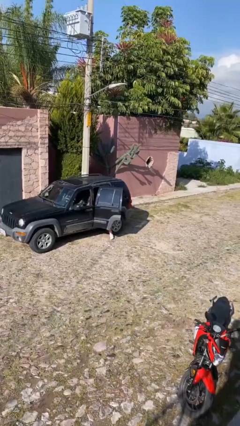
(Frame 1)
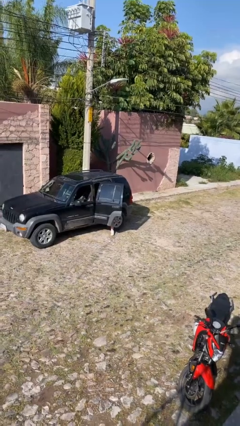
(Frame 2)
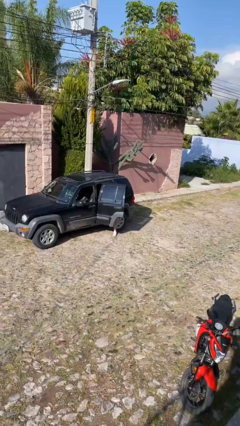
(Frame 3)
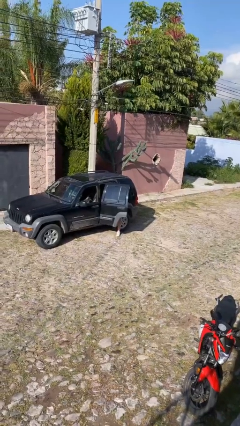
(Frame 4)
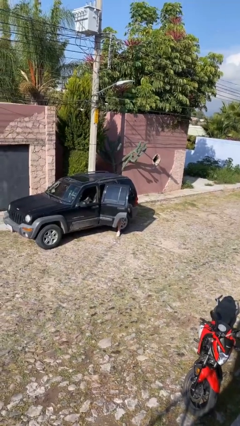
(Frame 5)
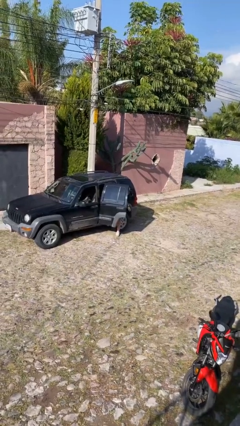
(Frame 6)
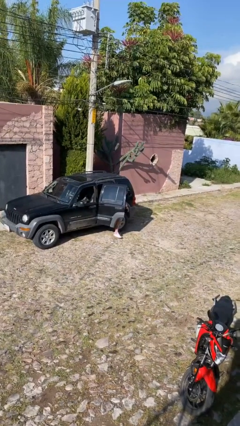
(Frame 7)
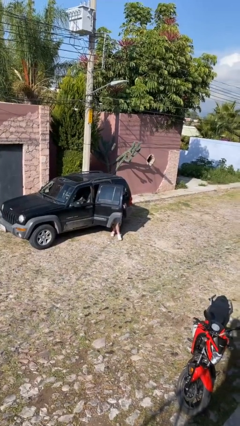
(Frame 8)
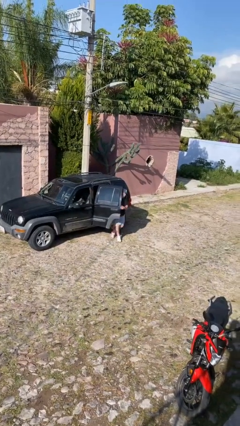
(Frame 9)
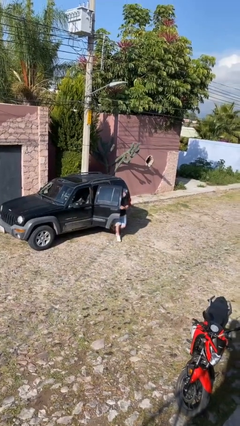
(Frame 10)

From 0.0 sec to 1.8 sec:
person exits car

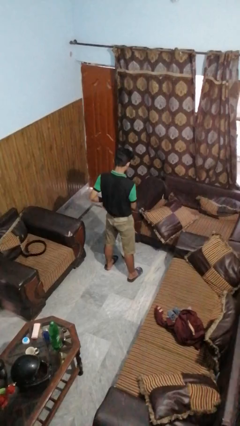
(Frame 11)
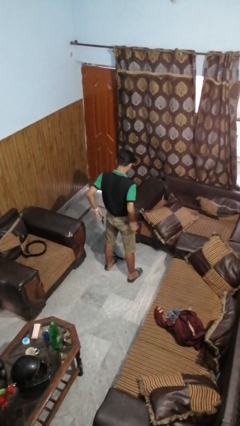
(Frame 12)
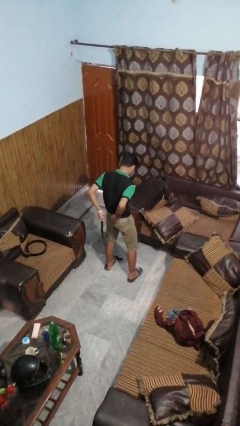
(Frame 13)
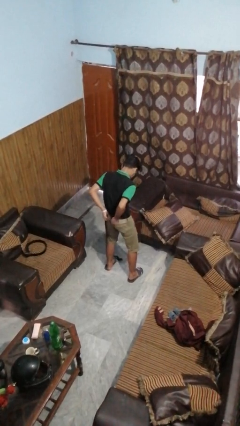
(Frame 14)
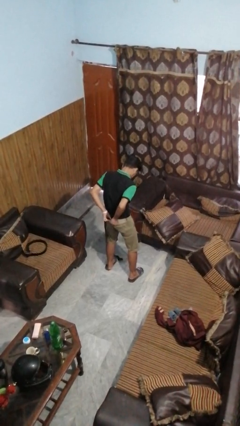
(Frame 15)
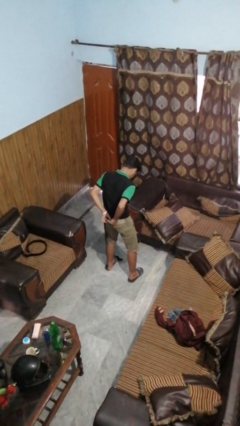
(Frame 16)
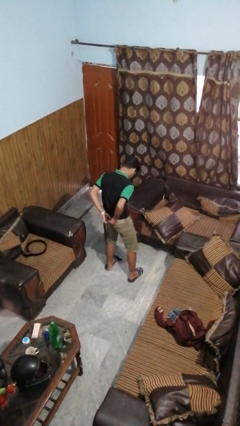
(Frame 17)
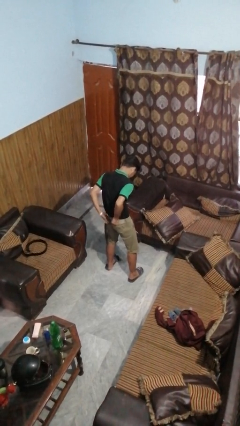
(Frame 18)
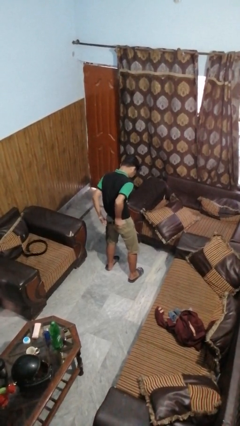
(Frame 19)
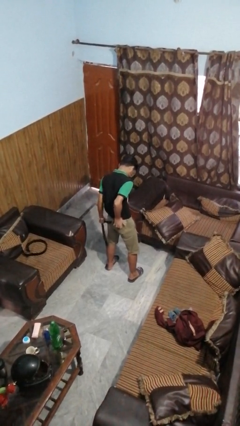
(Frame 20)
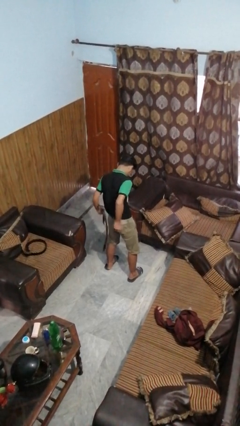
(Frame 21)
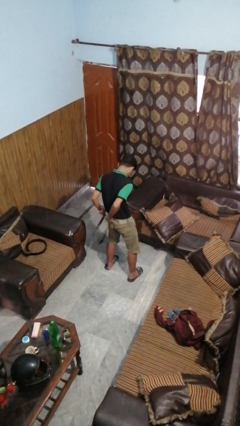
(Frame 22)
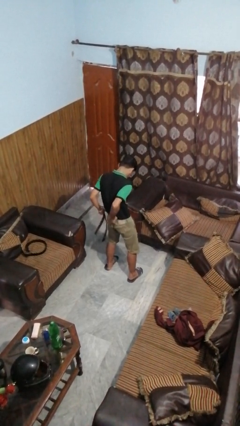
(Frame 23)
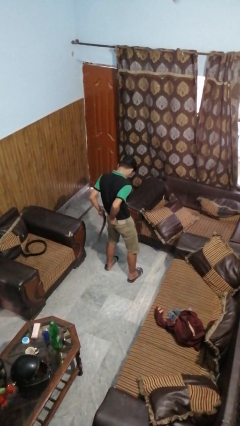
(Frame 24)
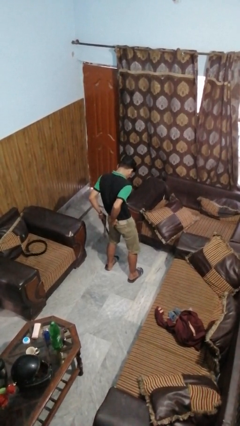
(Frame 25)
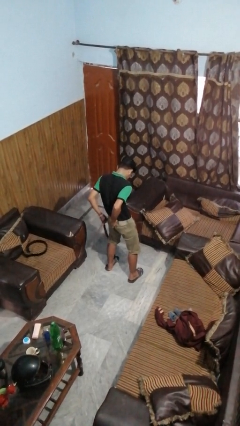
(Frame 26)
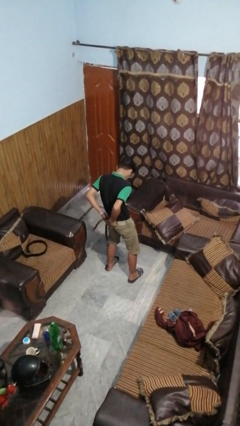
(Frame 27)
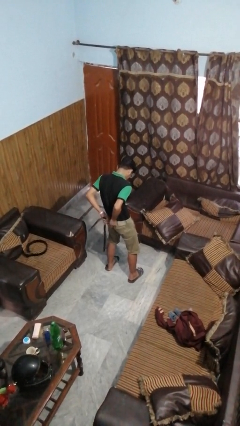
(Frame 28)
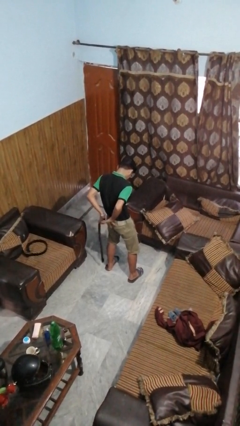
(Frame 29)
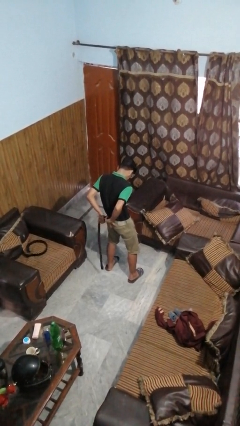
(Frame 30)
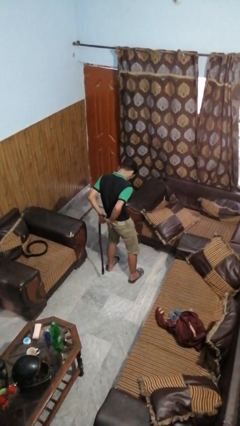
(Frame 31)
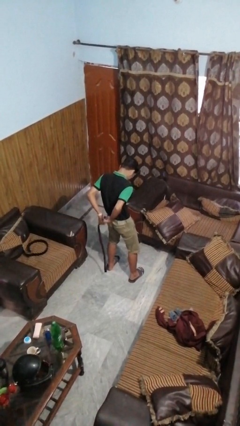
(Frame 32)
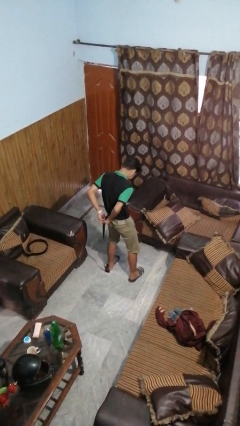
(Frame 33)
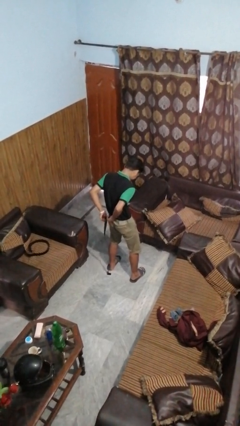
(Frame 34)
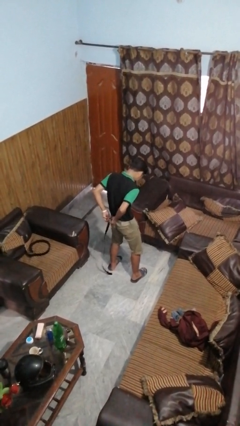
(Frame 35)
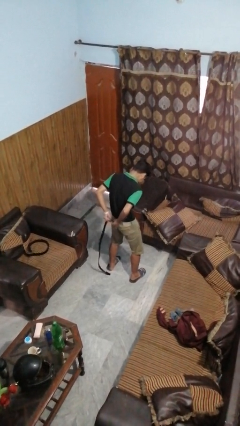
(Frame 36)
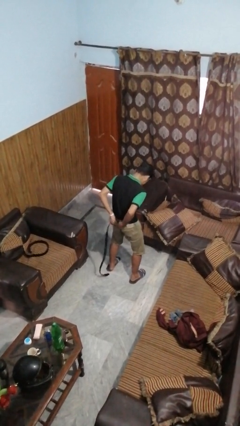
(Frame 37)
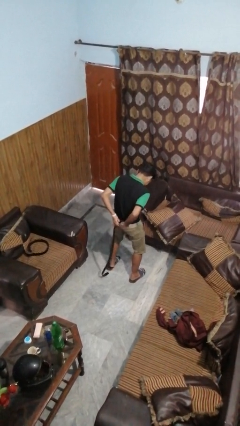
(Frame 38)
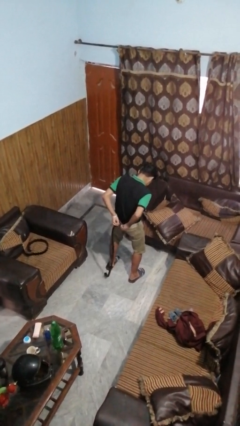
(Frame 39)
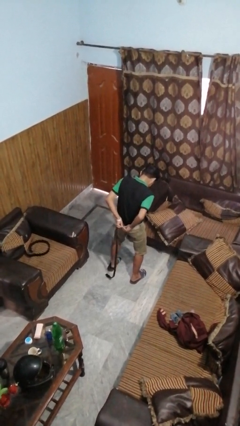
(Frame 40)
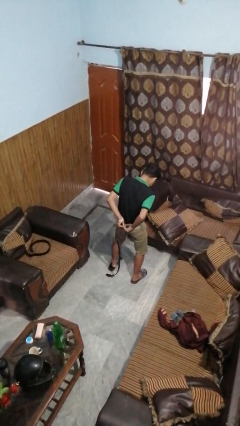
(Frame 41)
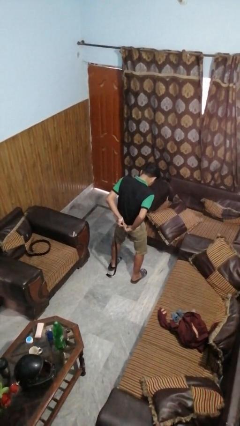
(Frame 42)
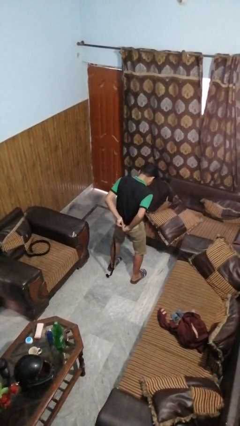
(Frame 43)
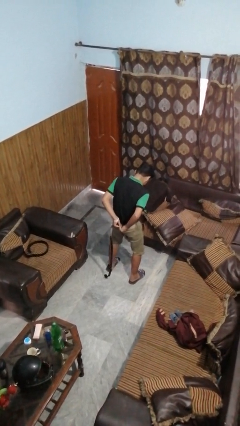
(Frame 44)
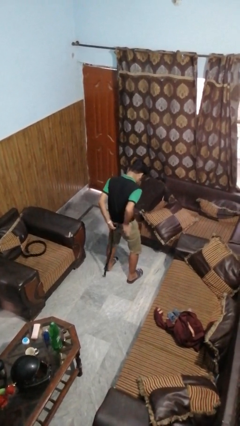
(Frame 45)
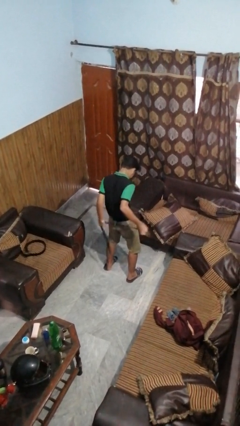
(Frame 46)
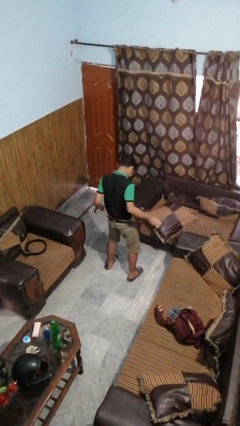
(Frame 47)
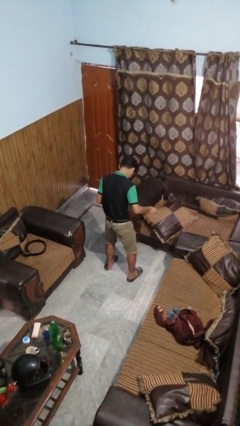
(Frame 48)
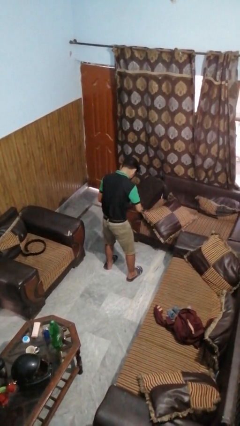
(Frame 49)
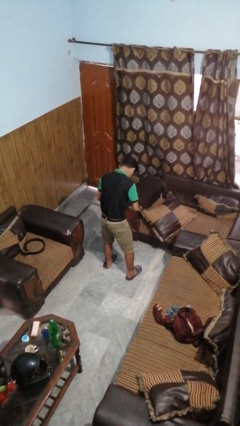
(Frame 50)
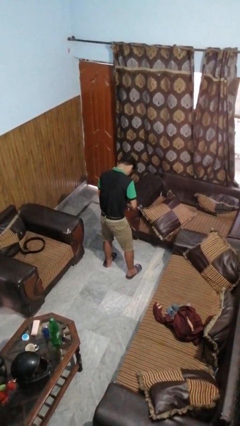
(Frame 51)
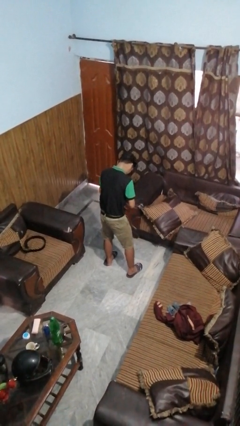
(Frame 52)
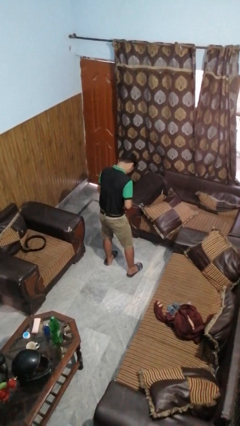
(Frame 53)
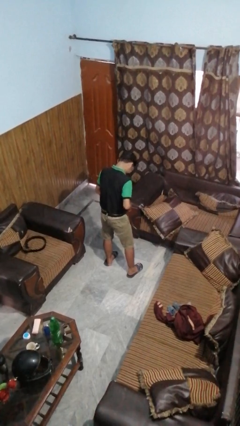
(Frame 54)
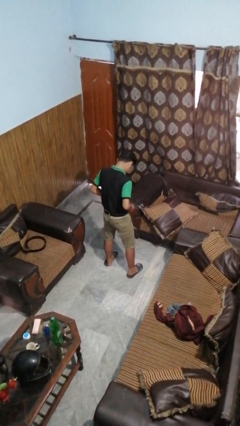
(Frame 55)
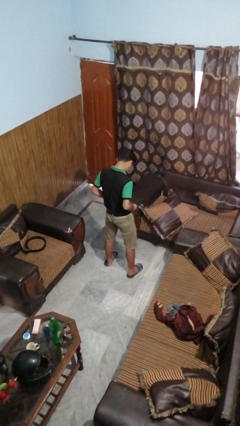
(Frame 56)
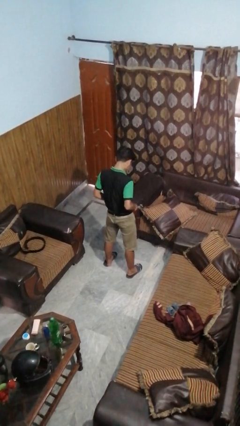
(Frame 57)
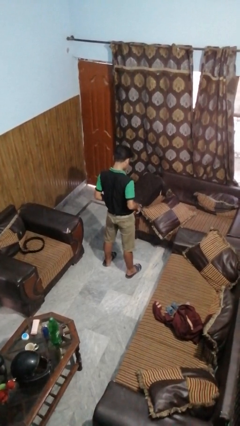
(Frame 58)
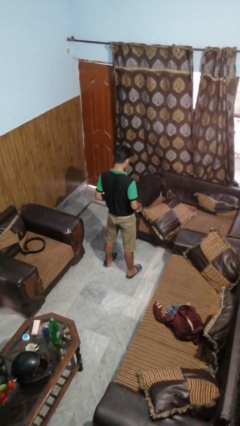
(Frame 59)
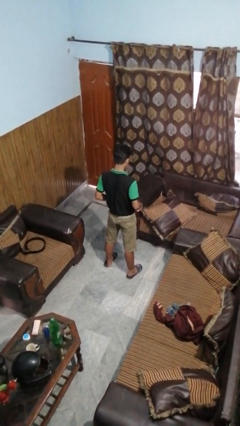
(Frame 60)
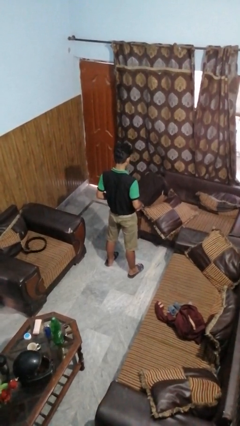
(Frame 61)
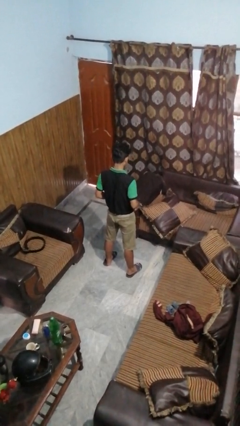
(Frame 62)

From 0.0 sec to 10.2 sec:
person puts on belt

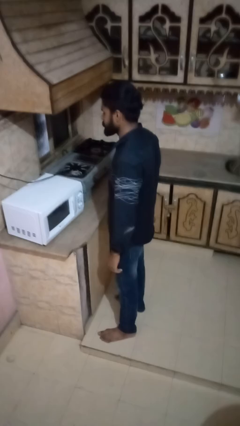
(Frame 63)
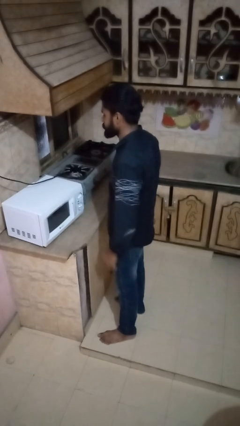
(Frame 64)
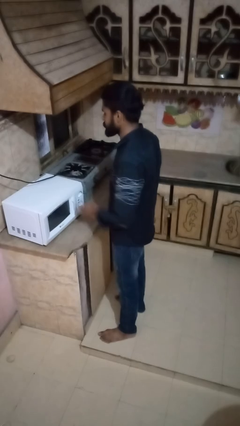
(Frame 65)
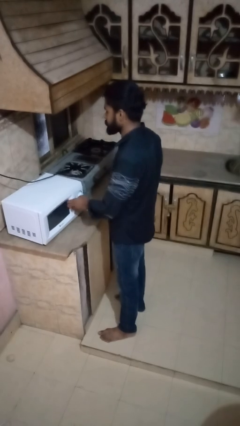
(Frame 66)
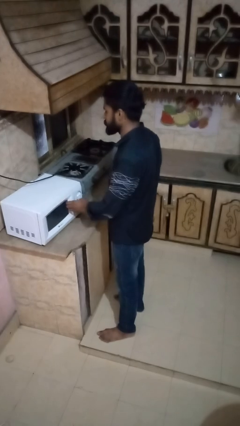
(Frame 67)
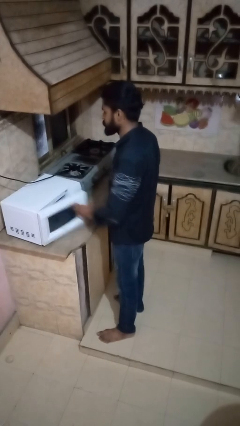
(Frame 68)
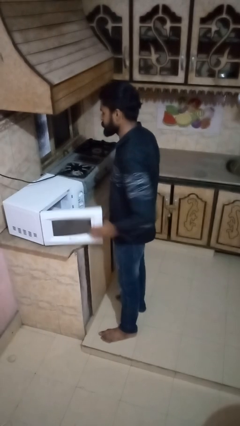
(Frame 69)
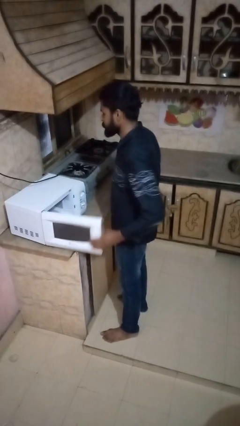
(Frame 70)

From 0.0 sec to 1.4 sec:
person opens oven door

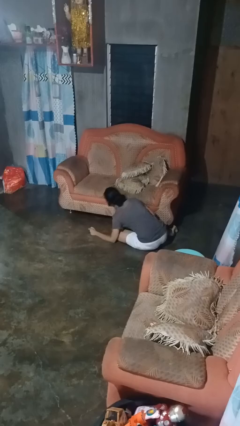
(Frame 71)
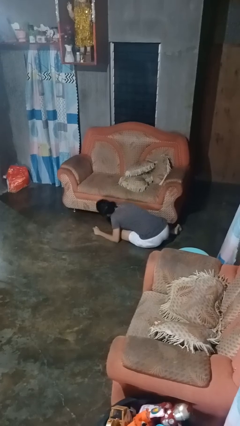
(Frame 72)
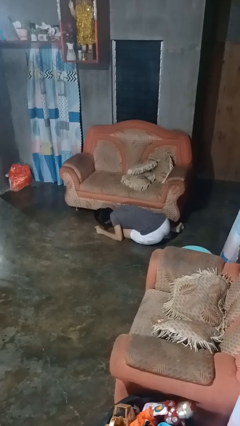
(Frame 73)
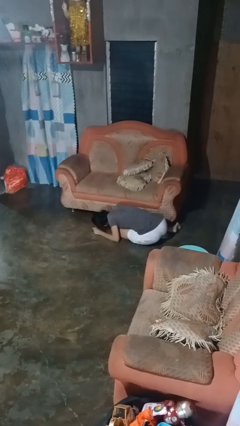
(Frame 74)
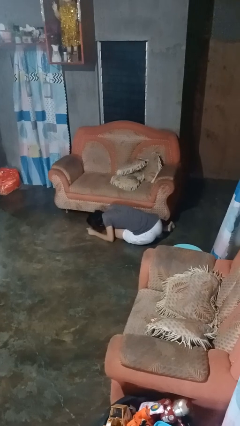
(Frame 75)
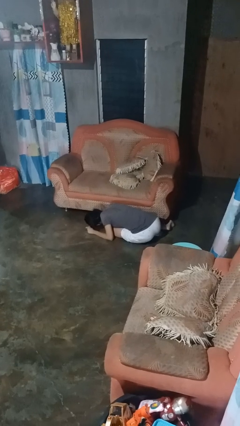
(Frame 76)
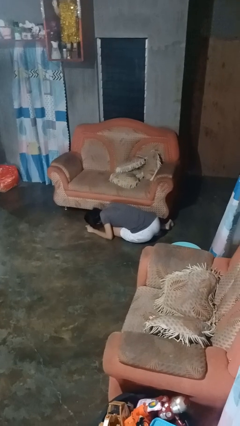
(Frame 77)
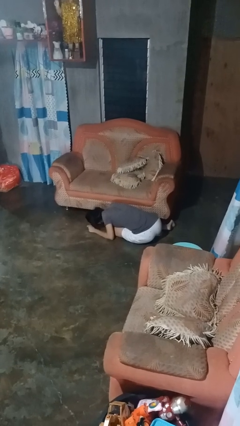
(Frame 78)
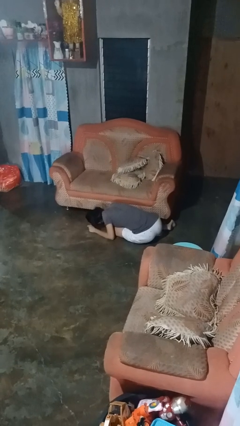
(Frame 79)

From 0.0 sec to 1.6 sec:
person searches under couch

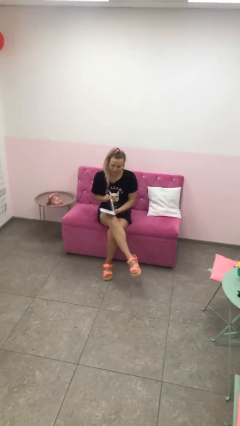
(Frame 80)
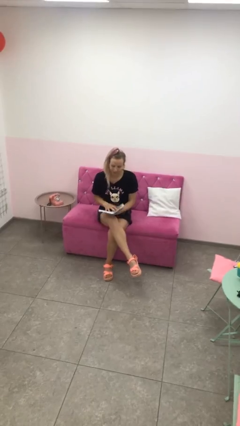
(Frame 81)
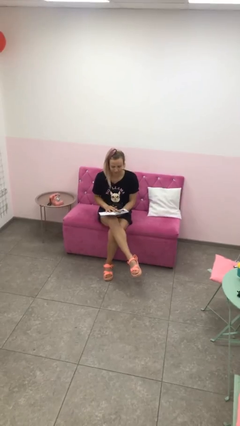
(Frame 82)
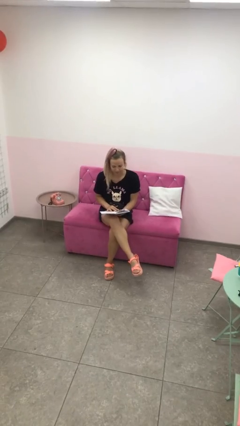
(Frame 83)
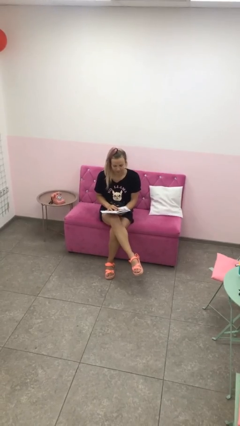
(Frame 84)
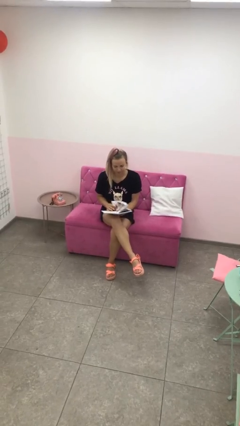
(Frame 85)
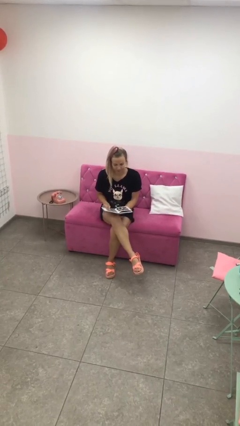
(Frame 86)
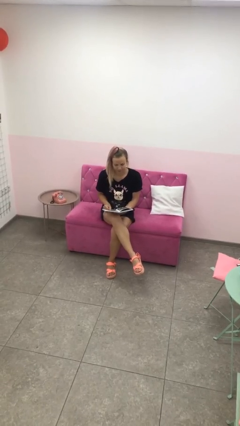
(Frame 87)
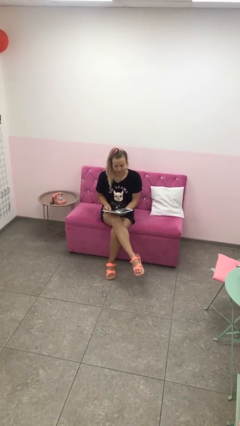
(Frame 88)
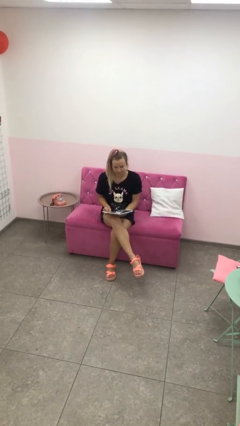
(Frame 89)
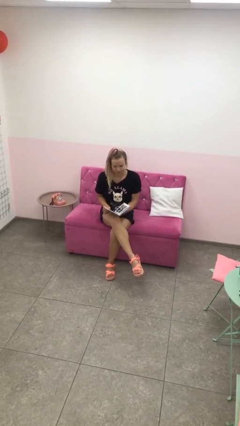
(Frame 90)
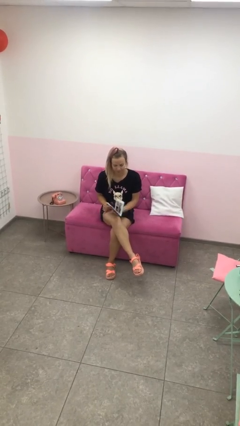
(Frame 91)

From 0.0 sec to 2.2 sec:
person reads book
